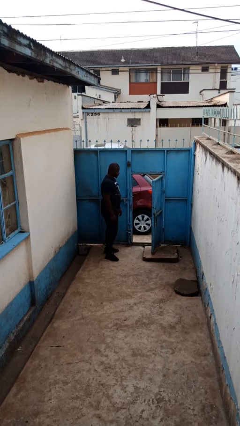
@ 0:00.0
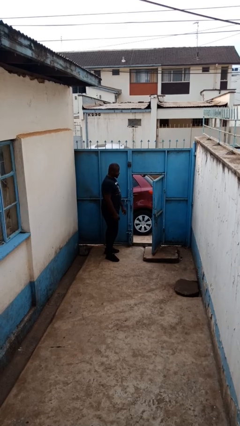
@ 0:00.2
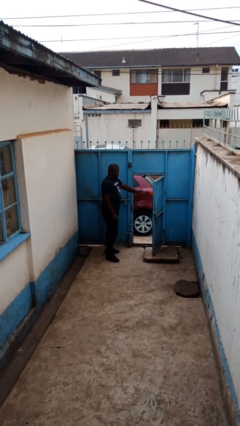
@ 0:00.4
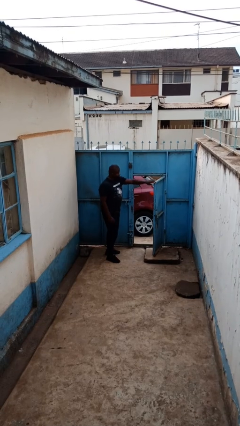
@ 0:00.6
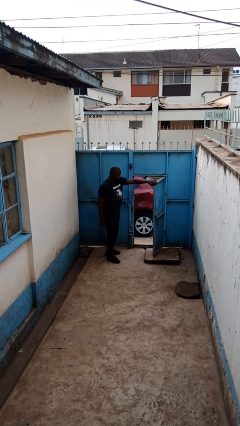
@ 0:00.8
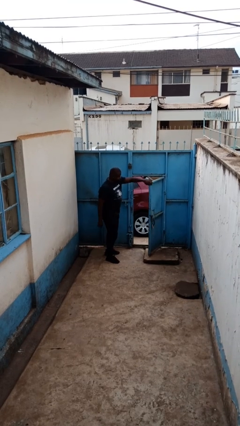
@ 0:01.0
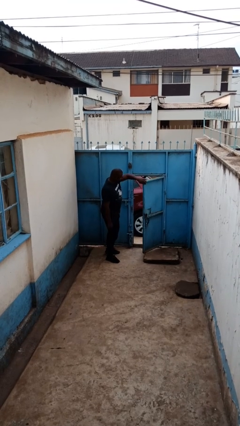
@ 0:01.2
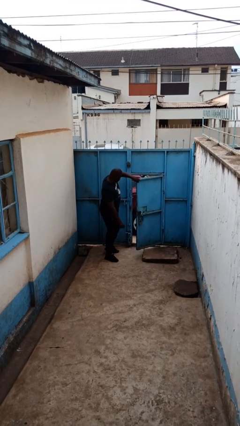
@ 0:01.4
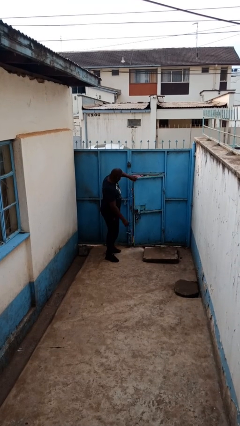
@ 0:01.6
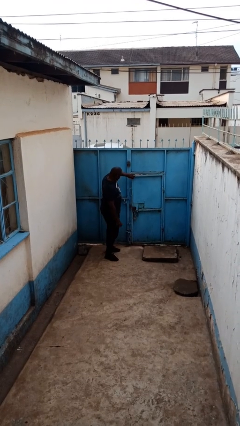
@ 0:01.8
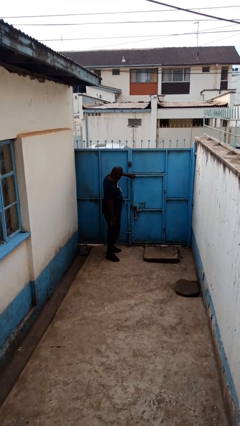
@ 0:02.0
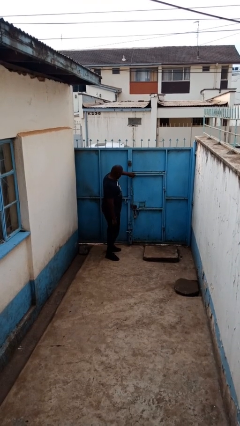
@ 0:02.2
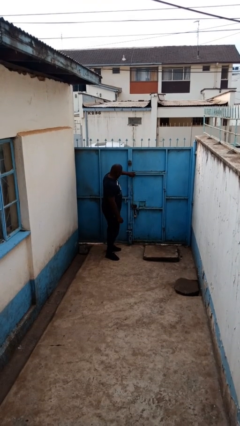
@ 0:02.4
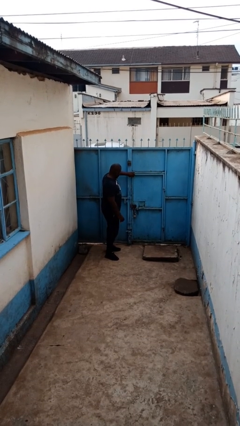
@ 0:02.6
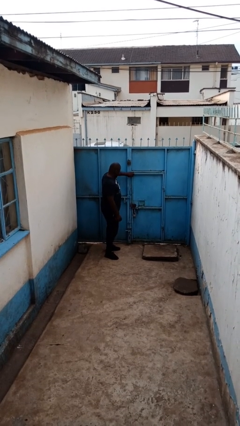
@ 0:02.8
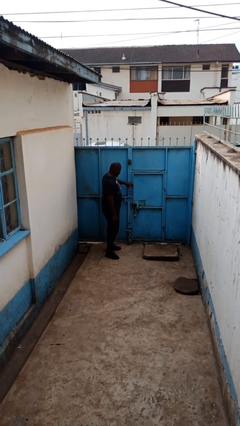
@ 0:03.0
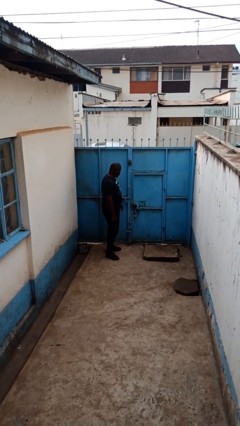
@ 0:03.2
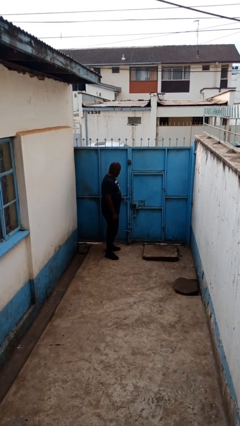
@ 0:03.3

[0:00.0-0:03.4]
person closes gate

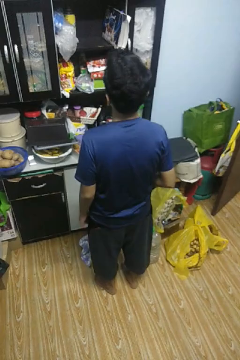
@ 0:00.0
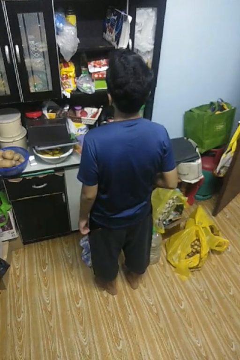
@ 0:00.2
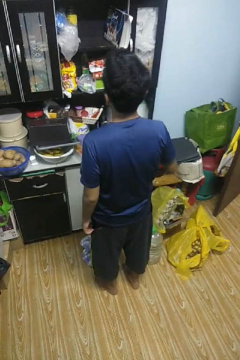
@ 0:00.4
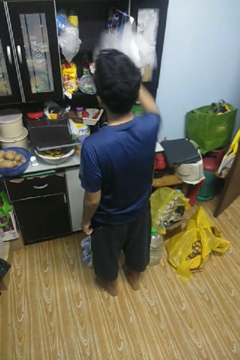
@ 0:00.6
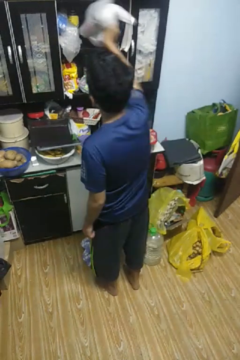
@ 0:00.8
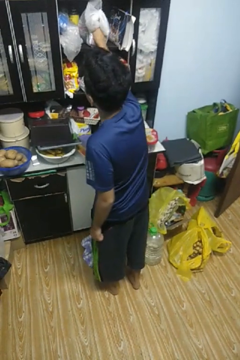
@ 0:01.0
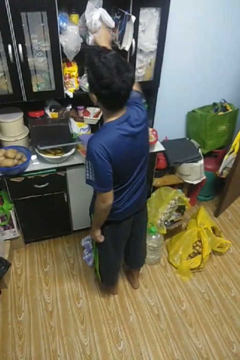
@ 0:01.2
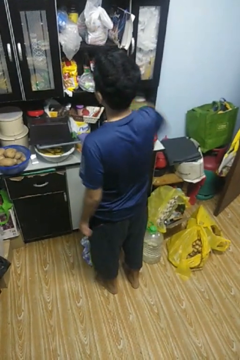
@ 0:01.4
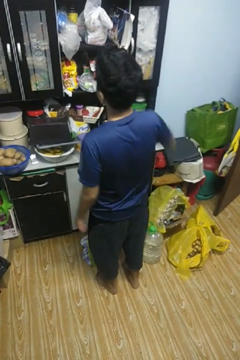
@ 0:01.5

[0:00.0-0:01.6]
person loads groceries into cabinet

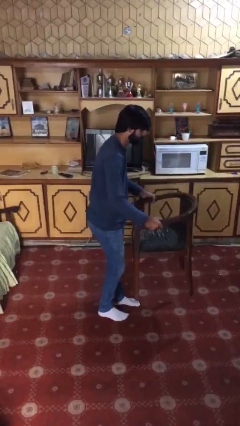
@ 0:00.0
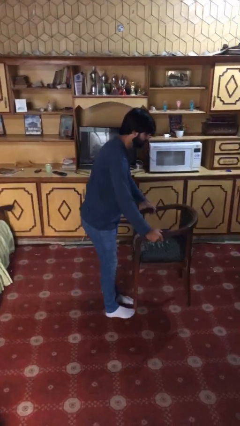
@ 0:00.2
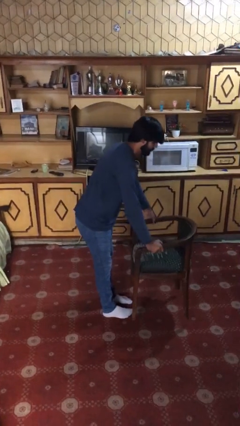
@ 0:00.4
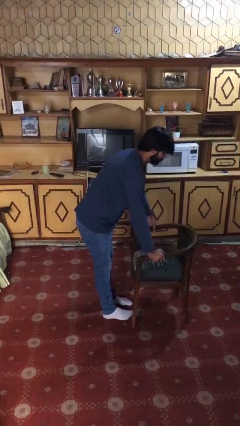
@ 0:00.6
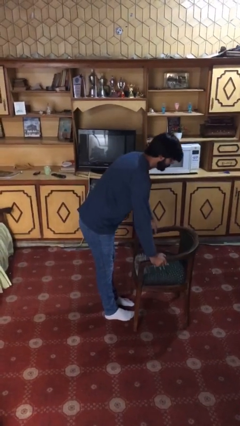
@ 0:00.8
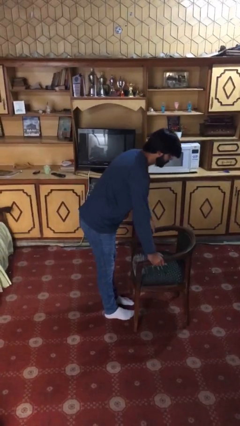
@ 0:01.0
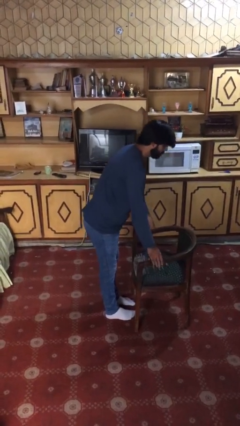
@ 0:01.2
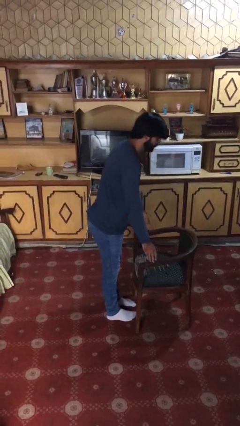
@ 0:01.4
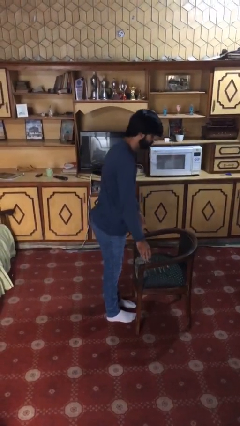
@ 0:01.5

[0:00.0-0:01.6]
person puts down object on floor

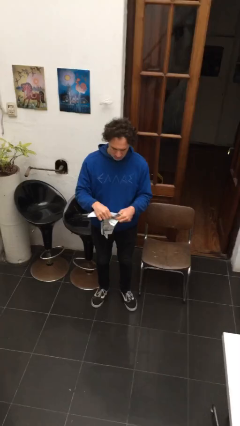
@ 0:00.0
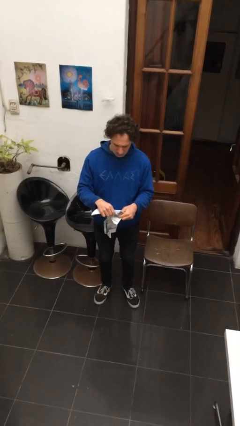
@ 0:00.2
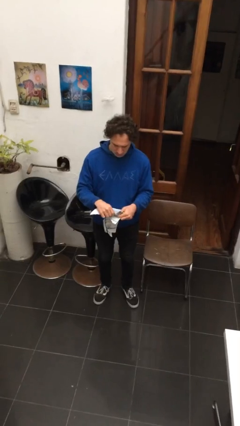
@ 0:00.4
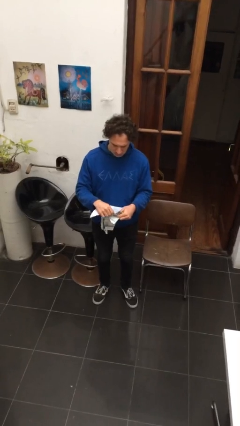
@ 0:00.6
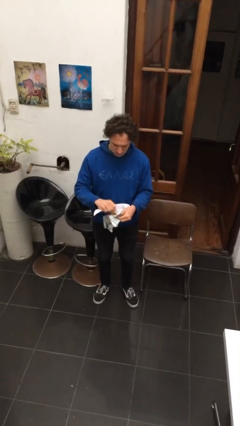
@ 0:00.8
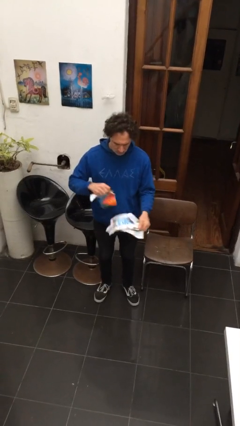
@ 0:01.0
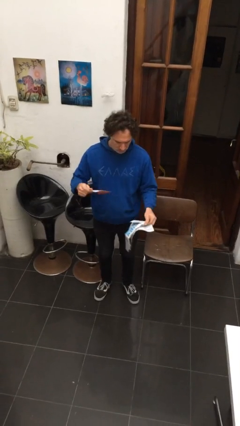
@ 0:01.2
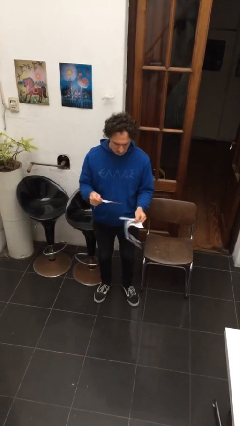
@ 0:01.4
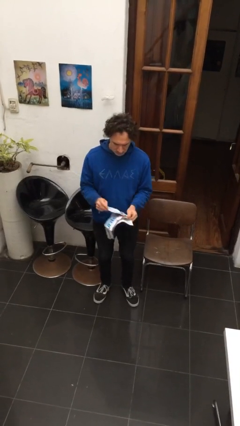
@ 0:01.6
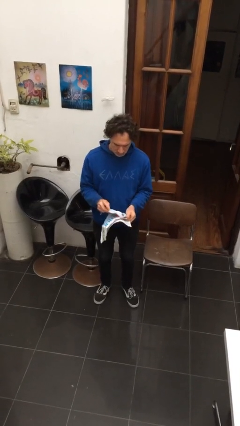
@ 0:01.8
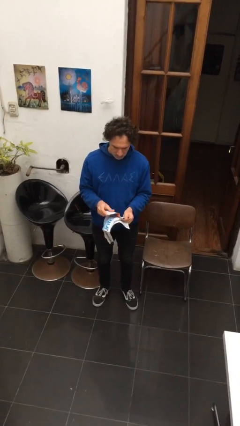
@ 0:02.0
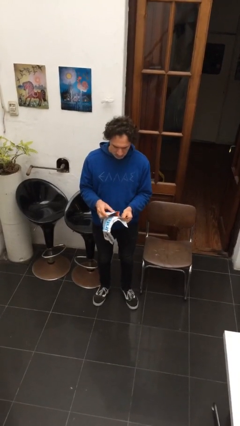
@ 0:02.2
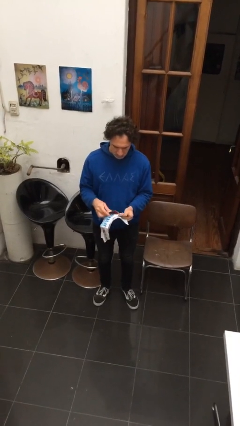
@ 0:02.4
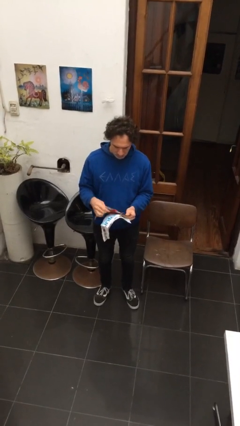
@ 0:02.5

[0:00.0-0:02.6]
person tears paper

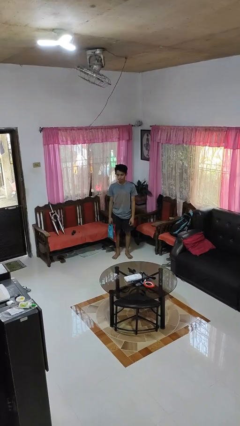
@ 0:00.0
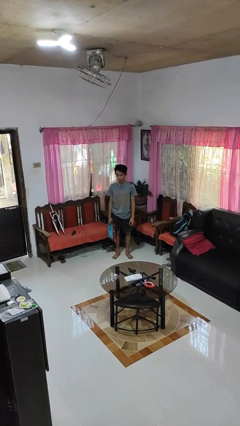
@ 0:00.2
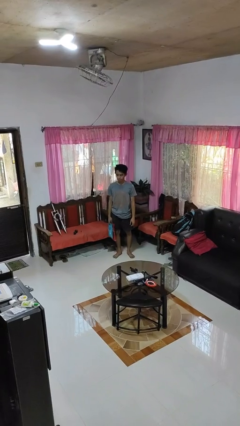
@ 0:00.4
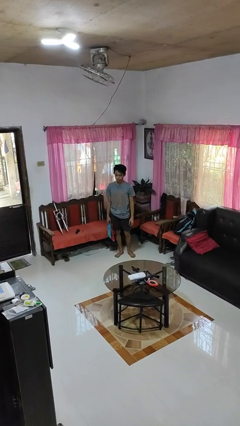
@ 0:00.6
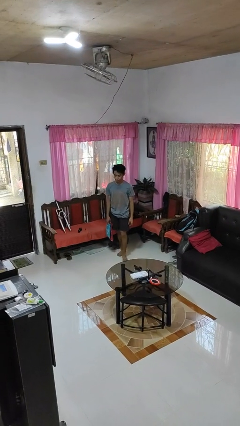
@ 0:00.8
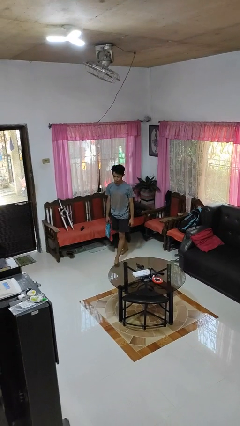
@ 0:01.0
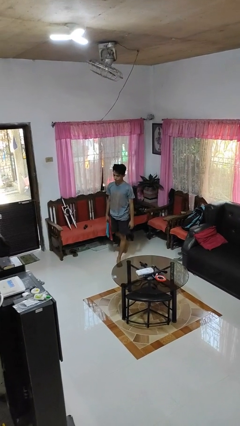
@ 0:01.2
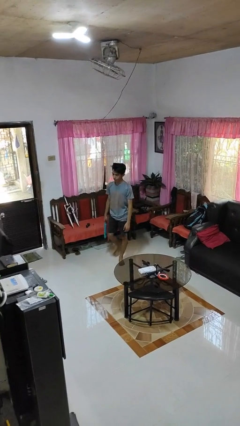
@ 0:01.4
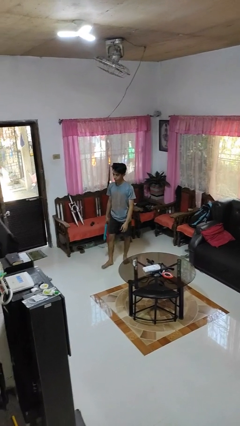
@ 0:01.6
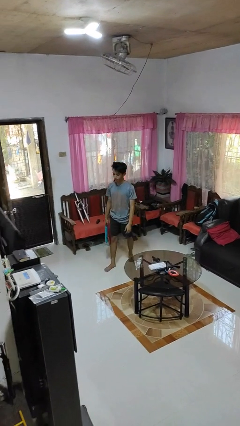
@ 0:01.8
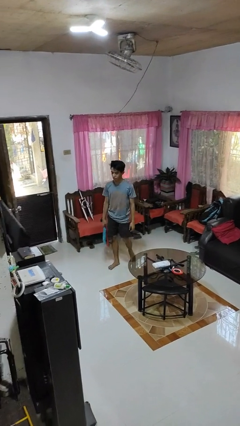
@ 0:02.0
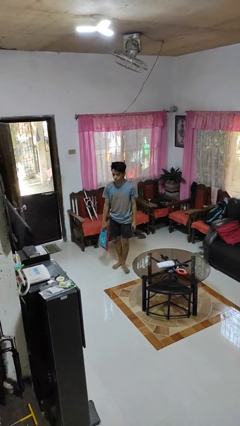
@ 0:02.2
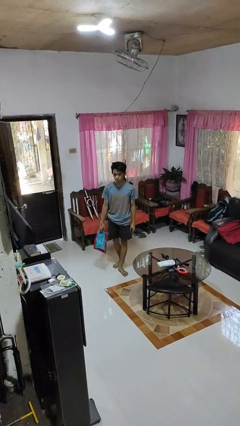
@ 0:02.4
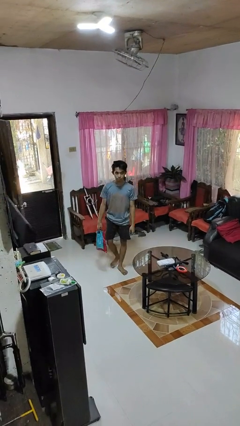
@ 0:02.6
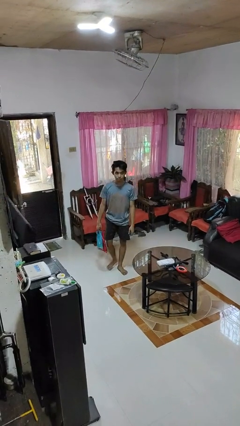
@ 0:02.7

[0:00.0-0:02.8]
person carries groceries

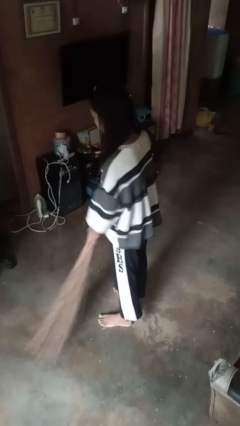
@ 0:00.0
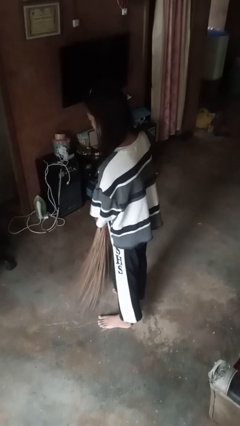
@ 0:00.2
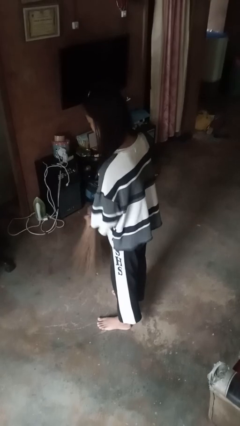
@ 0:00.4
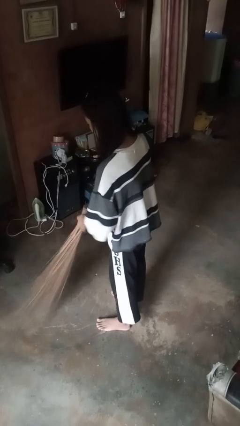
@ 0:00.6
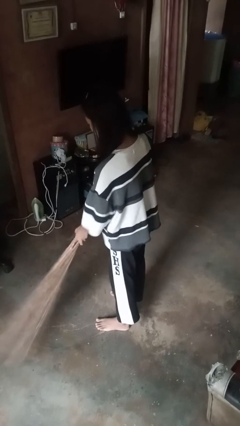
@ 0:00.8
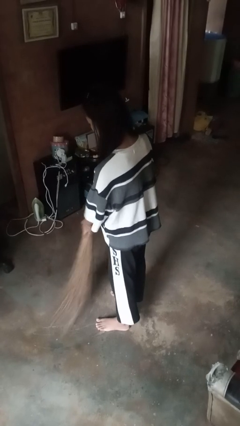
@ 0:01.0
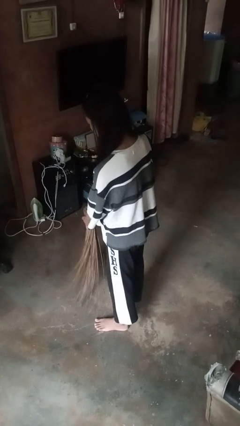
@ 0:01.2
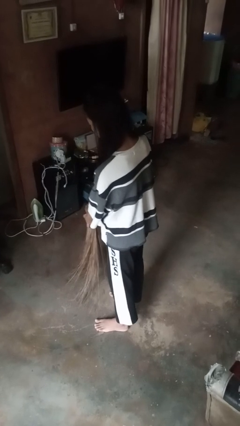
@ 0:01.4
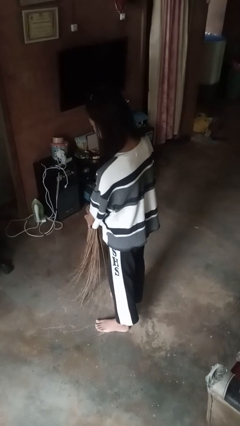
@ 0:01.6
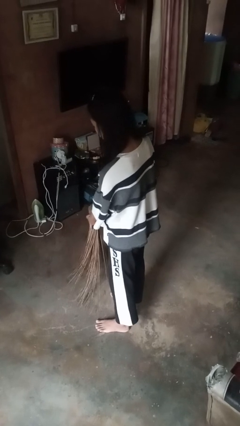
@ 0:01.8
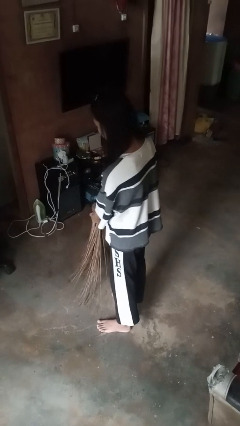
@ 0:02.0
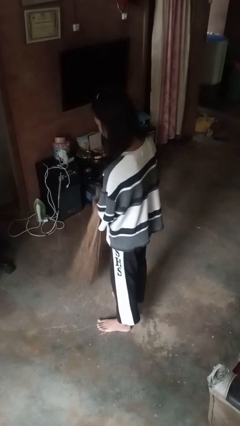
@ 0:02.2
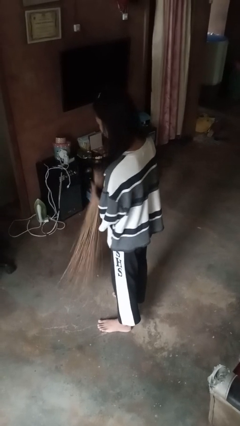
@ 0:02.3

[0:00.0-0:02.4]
person sweeps floor

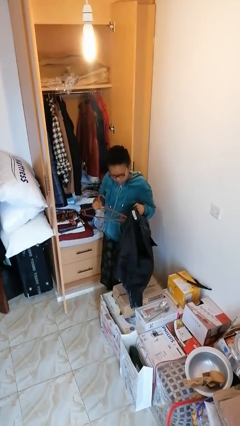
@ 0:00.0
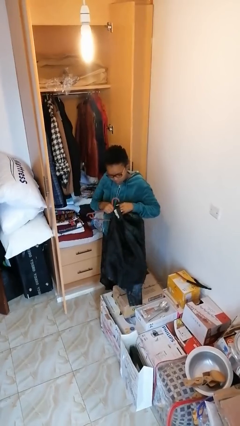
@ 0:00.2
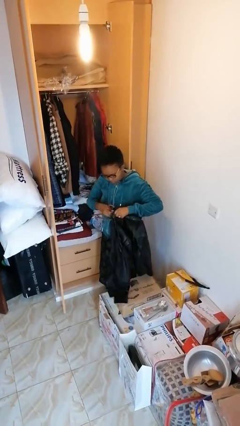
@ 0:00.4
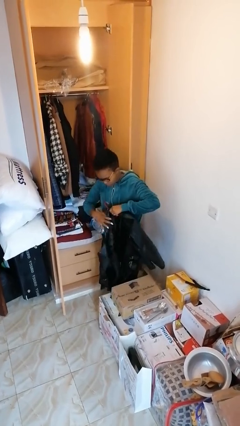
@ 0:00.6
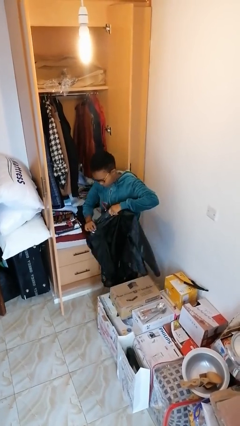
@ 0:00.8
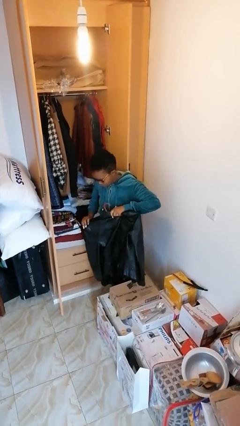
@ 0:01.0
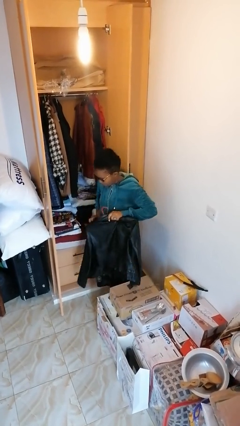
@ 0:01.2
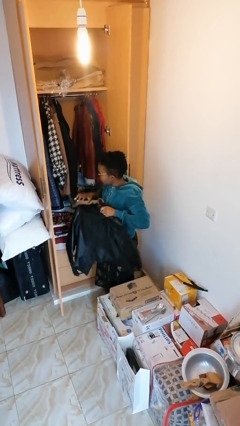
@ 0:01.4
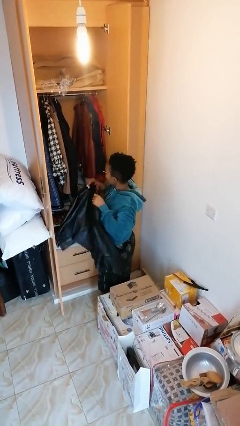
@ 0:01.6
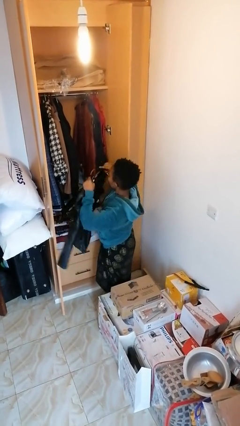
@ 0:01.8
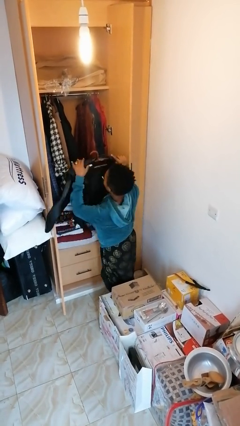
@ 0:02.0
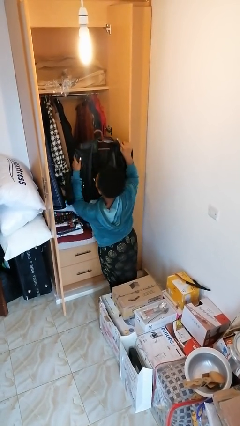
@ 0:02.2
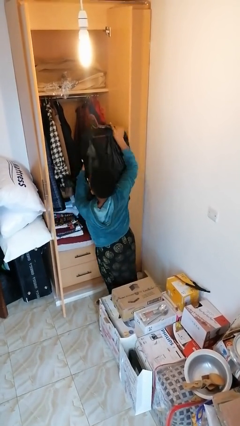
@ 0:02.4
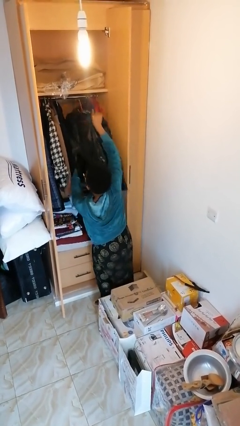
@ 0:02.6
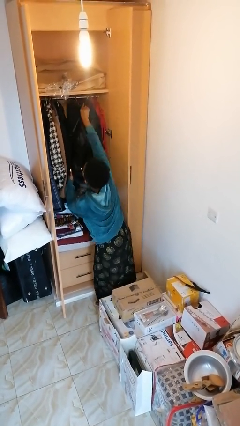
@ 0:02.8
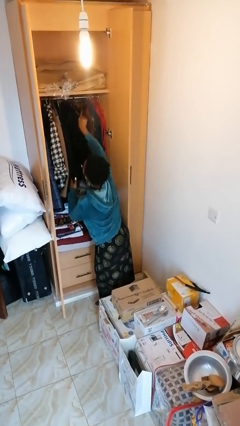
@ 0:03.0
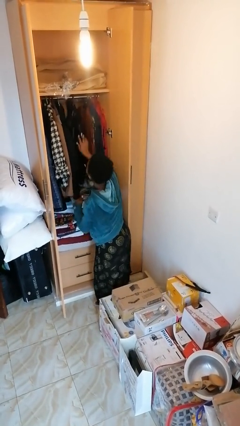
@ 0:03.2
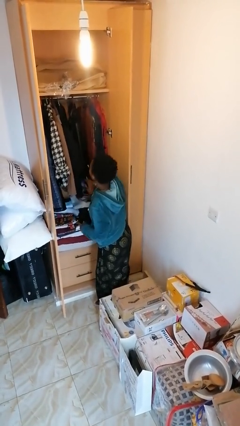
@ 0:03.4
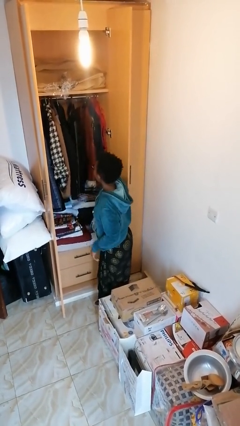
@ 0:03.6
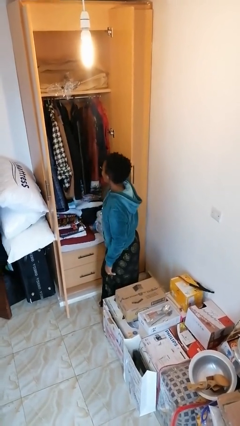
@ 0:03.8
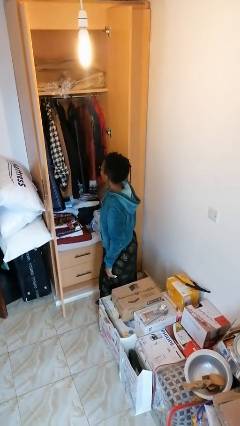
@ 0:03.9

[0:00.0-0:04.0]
person puts clothes into closet
